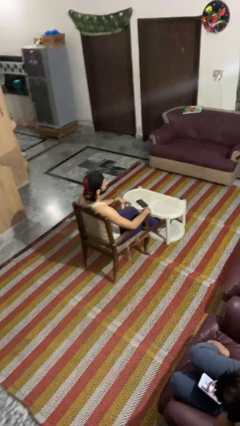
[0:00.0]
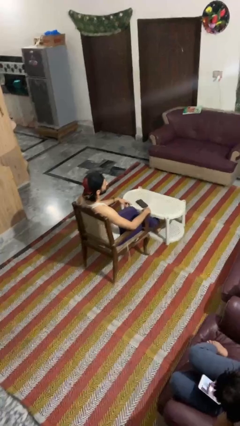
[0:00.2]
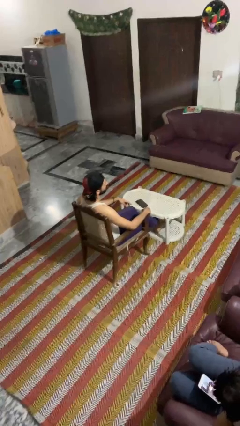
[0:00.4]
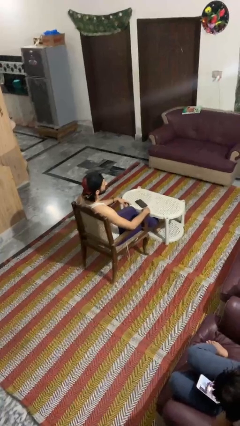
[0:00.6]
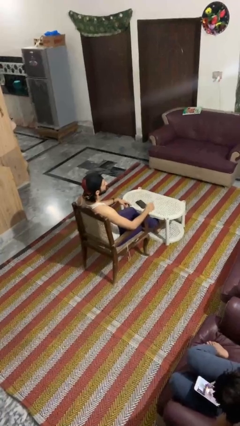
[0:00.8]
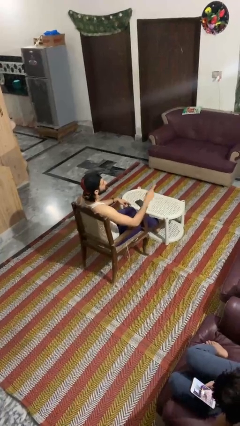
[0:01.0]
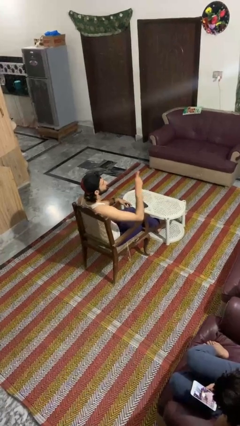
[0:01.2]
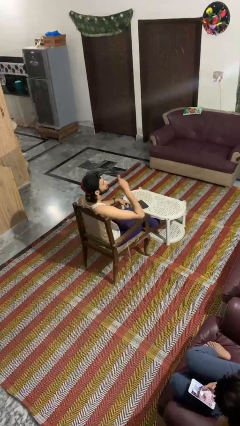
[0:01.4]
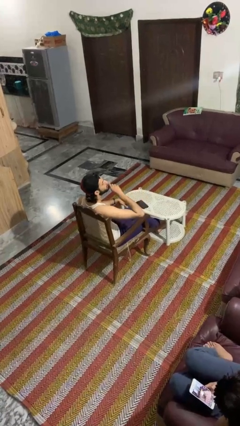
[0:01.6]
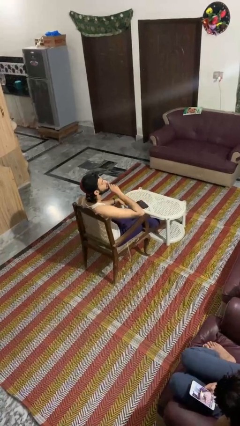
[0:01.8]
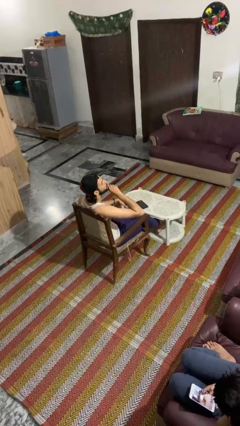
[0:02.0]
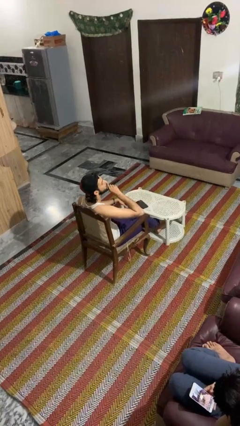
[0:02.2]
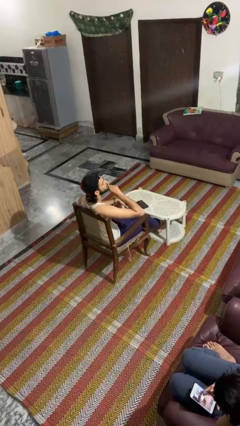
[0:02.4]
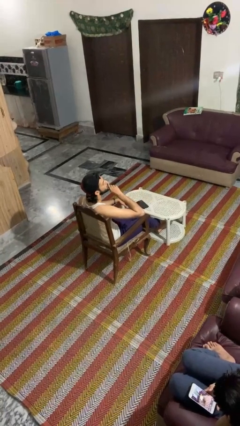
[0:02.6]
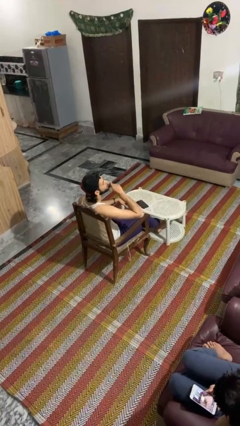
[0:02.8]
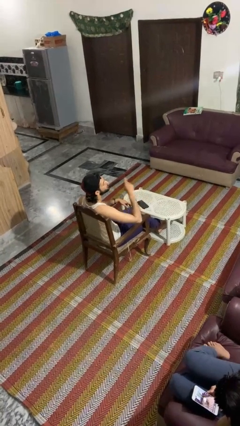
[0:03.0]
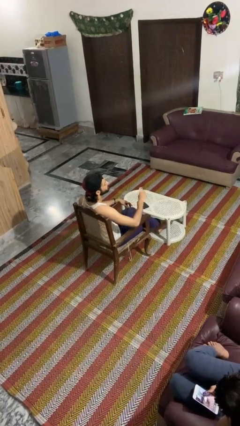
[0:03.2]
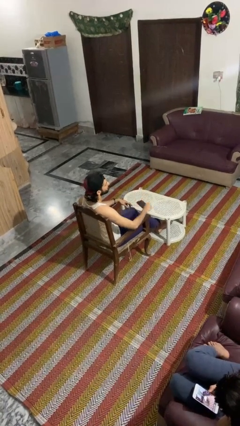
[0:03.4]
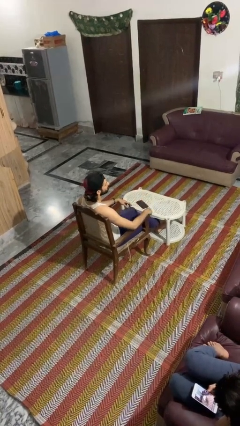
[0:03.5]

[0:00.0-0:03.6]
person gestures be quiet

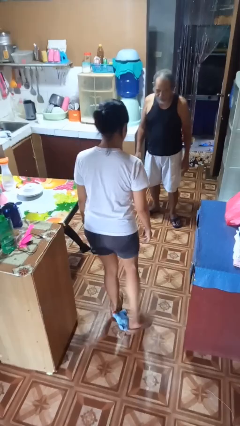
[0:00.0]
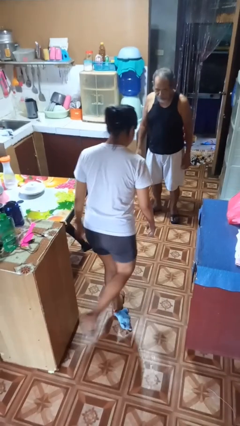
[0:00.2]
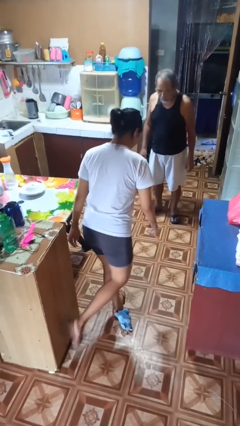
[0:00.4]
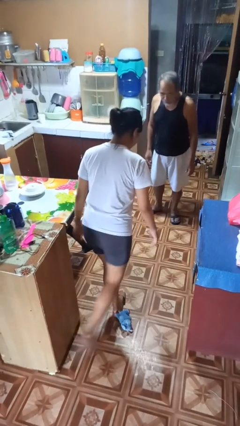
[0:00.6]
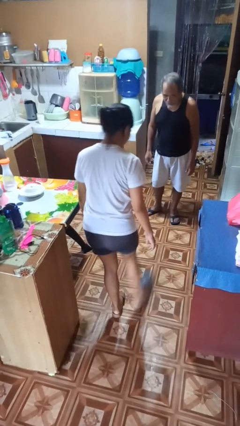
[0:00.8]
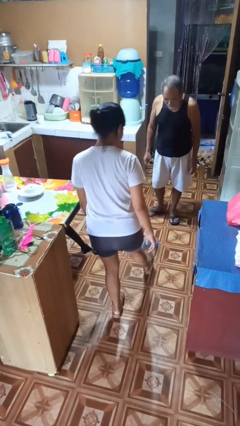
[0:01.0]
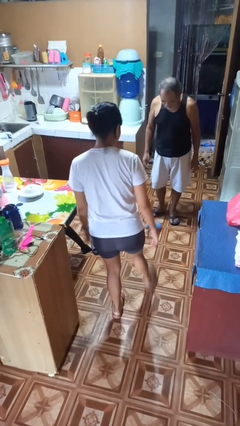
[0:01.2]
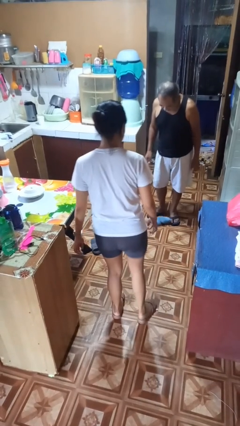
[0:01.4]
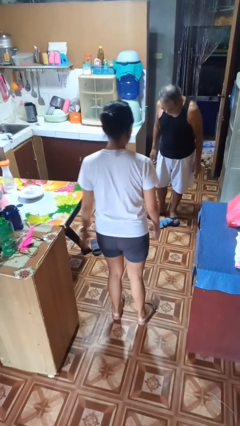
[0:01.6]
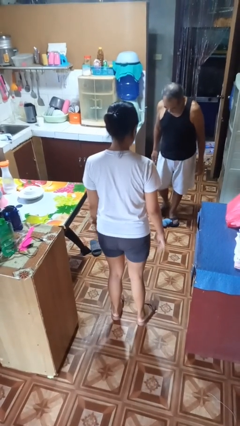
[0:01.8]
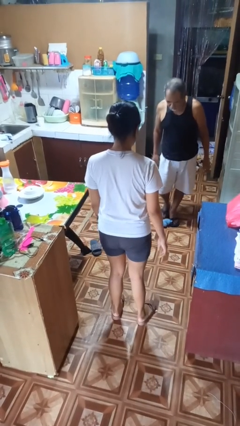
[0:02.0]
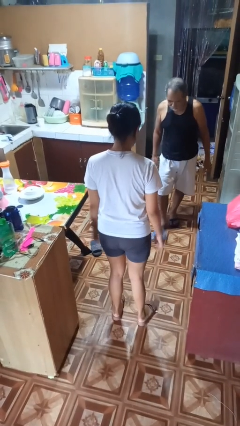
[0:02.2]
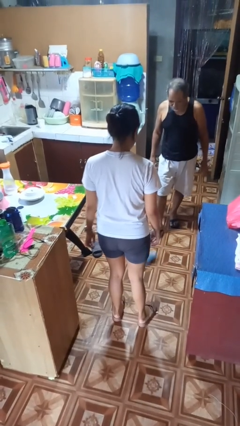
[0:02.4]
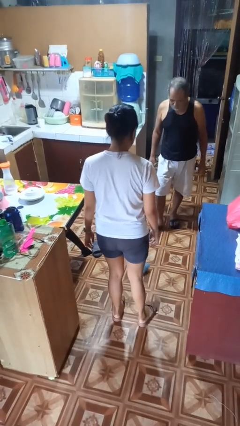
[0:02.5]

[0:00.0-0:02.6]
person kicks object to person

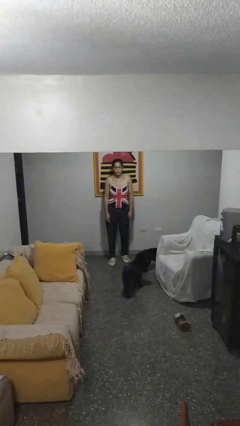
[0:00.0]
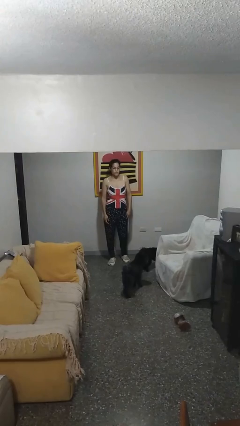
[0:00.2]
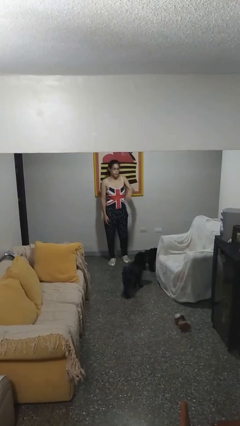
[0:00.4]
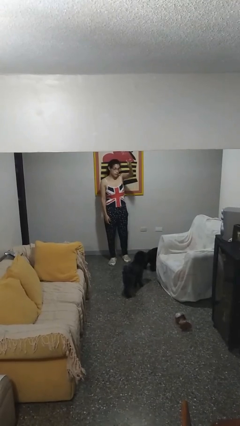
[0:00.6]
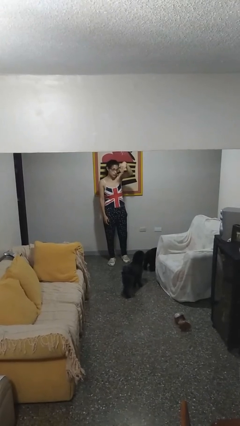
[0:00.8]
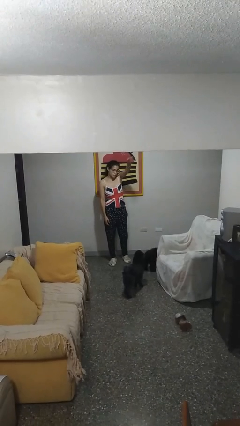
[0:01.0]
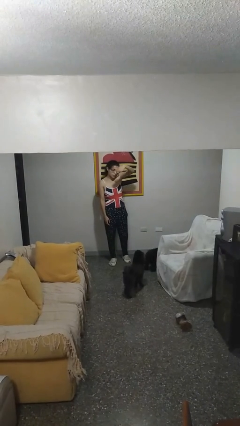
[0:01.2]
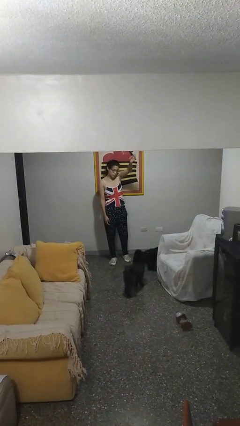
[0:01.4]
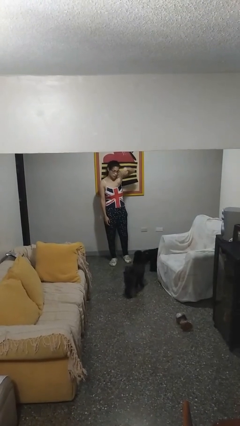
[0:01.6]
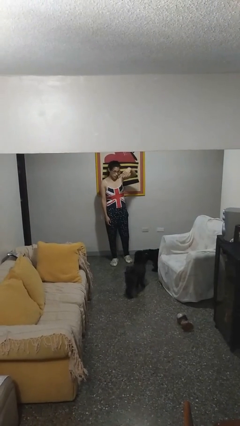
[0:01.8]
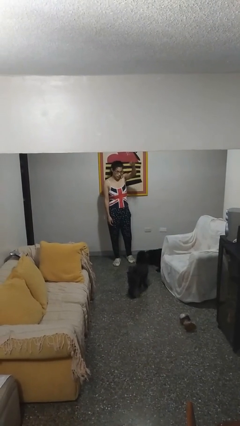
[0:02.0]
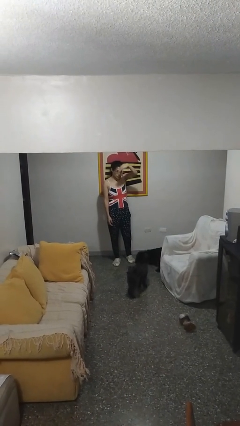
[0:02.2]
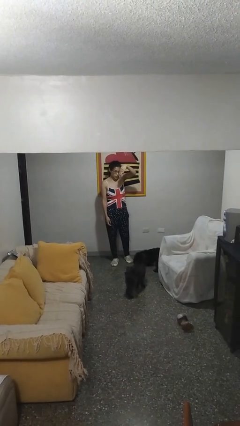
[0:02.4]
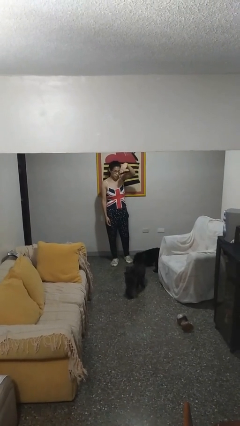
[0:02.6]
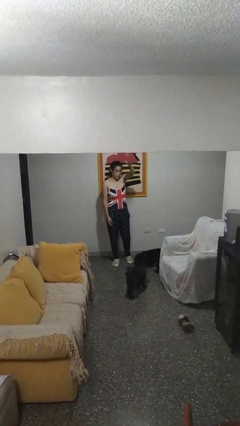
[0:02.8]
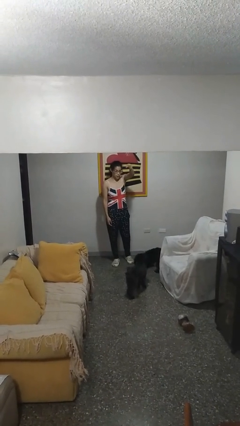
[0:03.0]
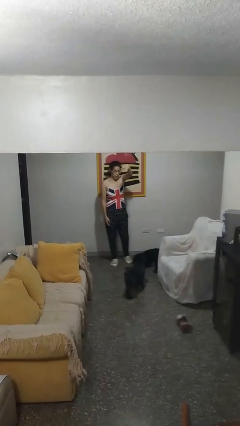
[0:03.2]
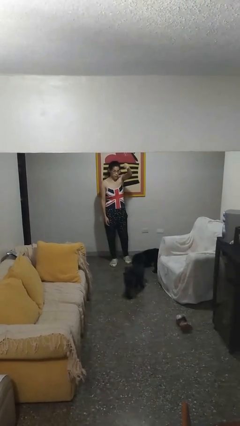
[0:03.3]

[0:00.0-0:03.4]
person gestures come here

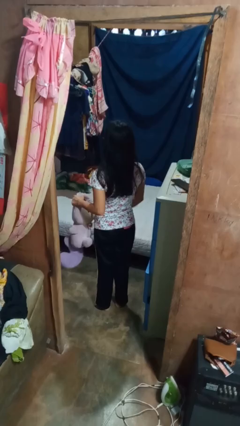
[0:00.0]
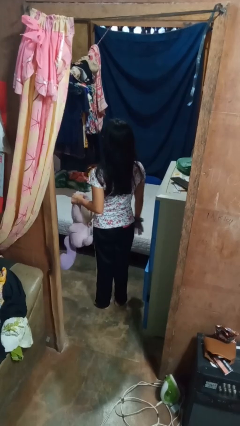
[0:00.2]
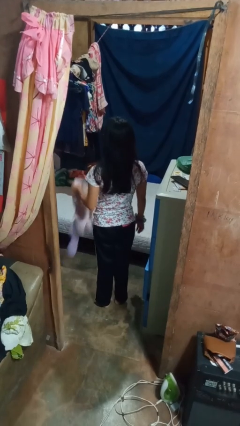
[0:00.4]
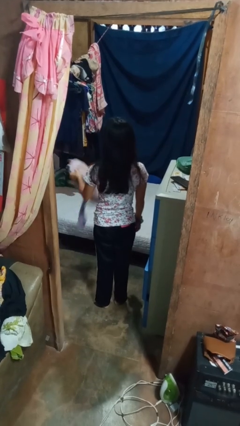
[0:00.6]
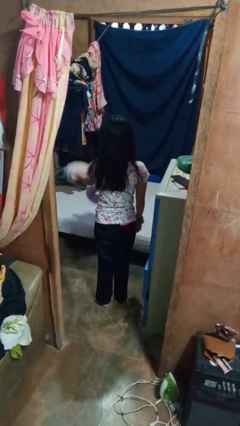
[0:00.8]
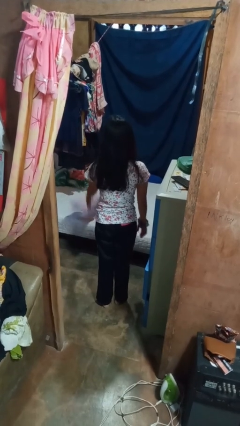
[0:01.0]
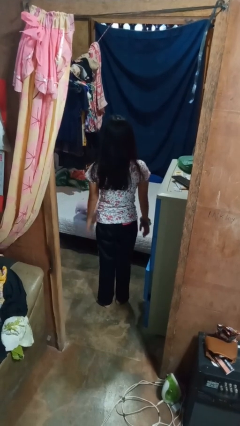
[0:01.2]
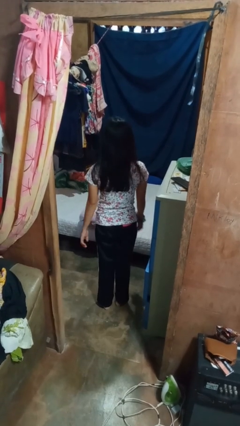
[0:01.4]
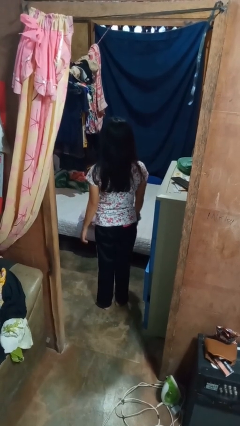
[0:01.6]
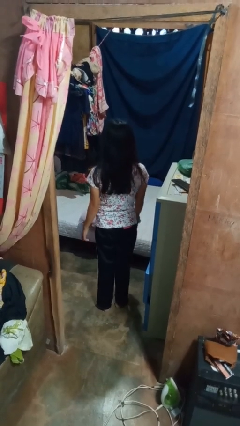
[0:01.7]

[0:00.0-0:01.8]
person throws object on bed

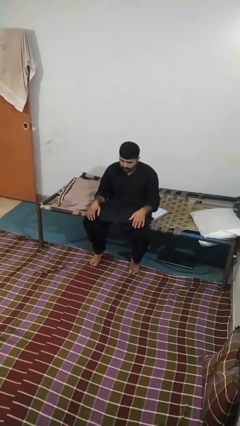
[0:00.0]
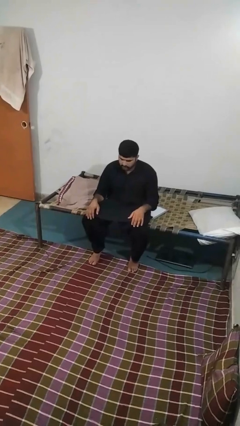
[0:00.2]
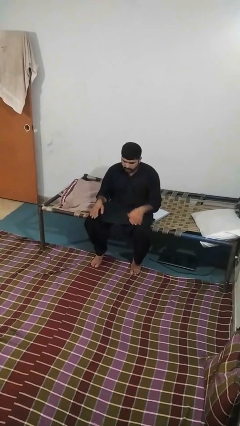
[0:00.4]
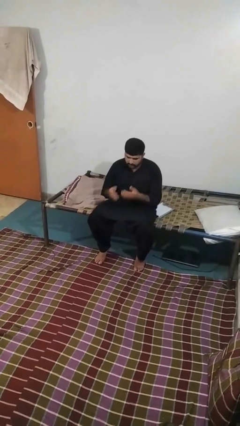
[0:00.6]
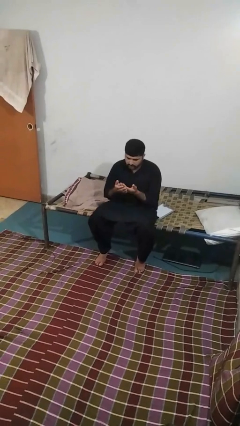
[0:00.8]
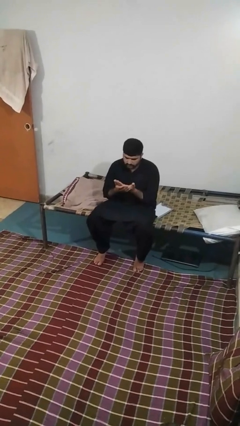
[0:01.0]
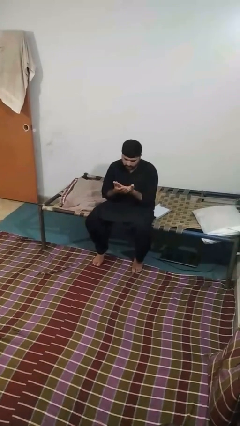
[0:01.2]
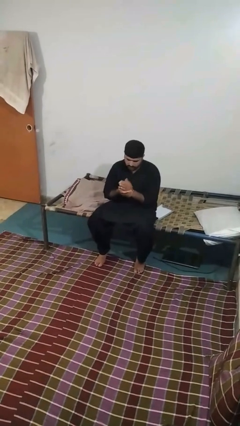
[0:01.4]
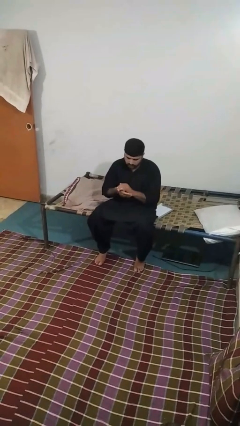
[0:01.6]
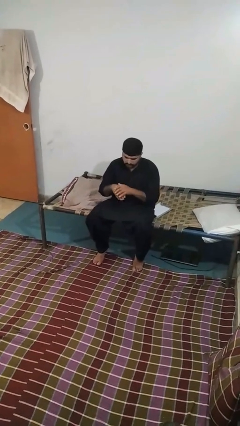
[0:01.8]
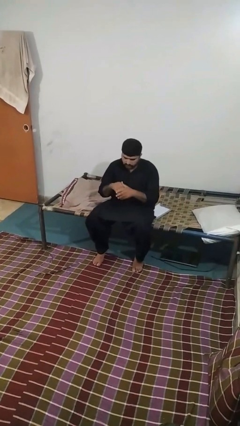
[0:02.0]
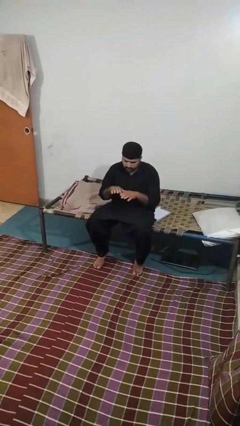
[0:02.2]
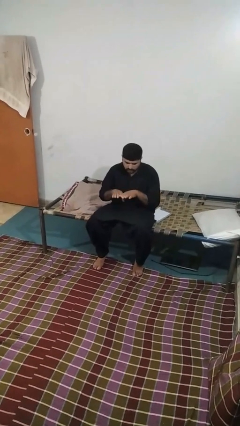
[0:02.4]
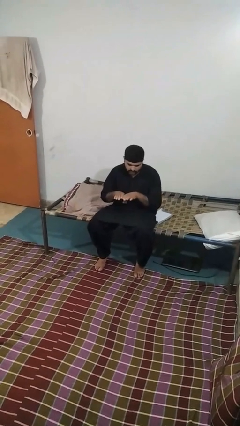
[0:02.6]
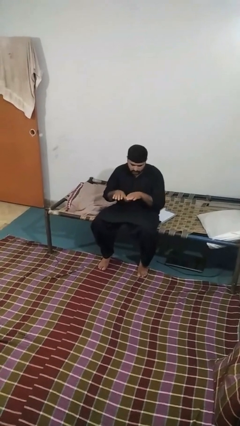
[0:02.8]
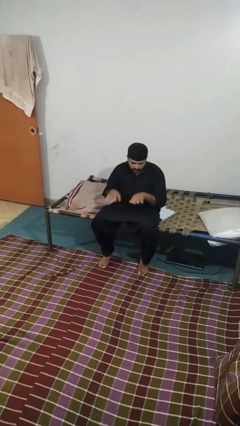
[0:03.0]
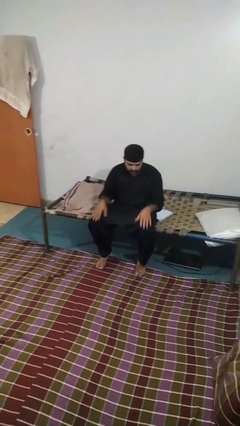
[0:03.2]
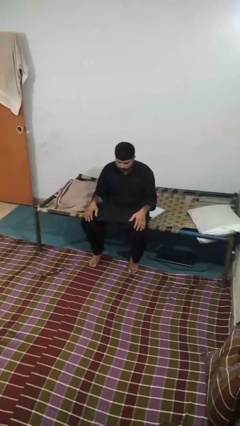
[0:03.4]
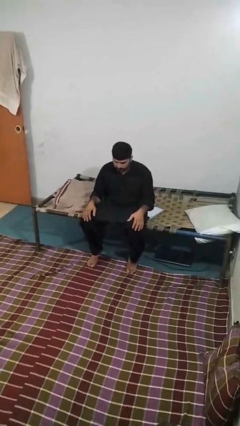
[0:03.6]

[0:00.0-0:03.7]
person looks at hands in lap

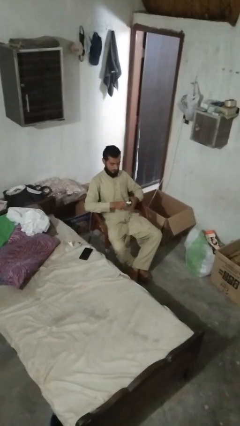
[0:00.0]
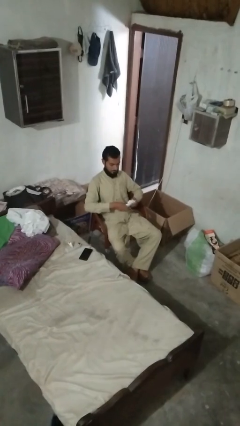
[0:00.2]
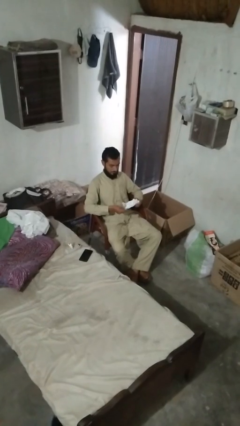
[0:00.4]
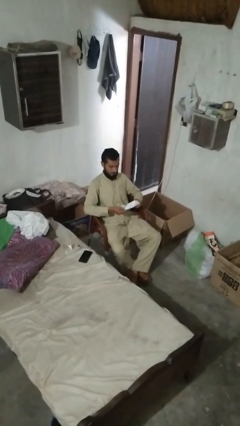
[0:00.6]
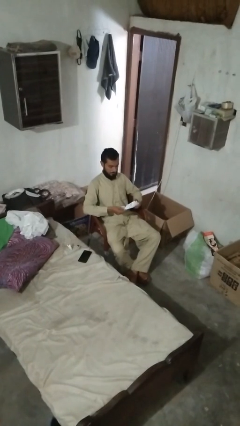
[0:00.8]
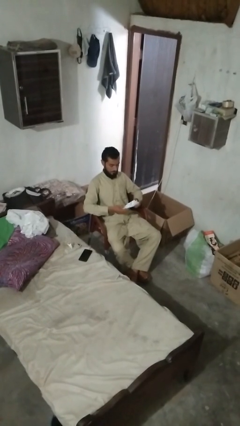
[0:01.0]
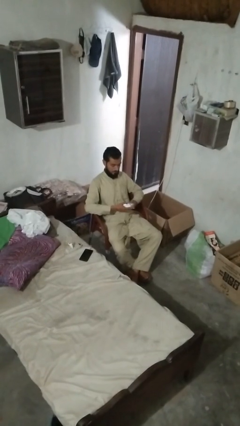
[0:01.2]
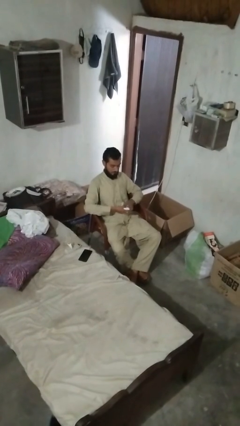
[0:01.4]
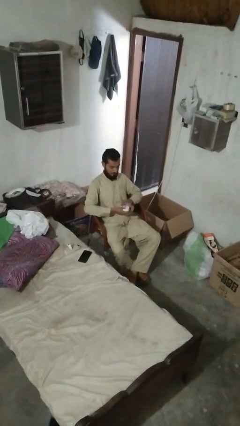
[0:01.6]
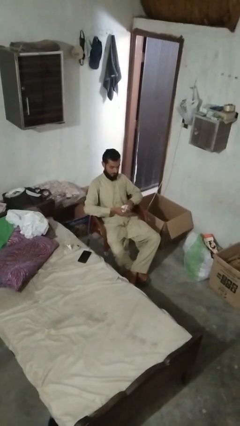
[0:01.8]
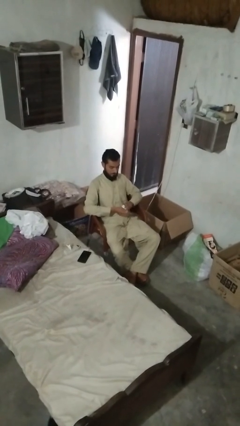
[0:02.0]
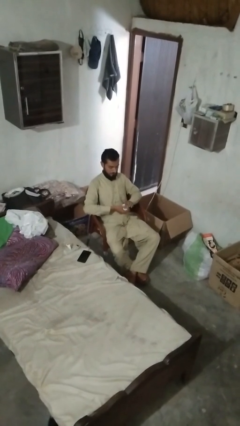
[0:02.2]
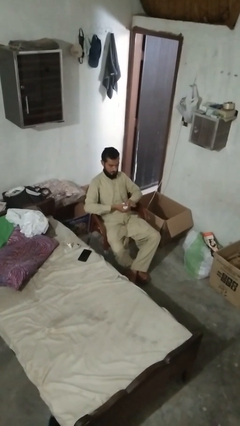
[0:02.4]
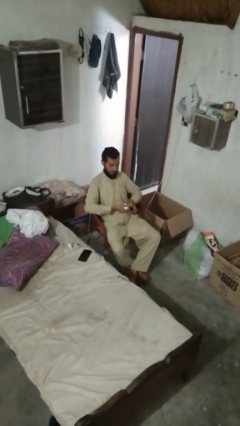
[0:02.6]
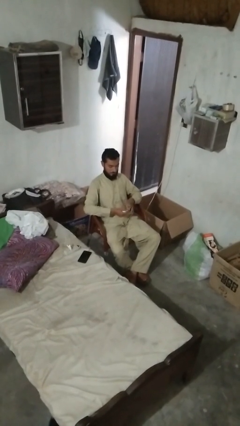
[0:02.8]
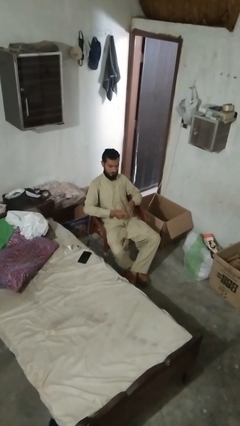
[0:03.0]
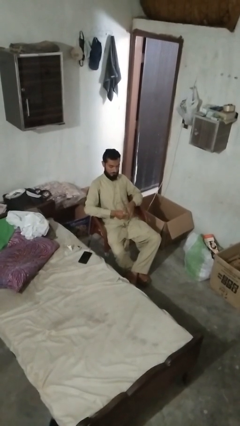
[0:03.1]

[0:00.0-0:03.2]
person crumples paper
